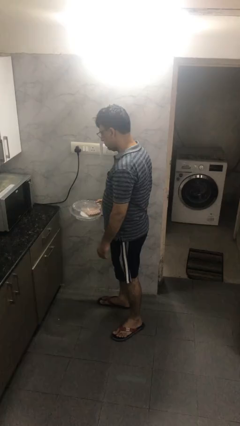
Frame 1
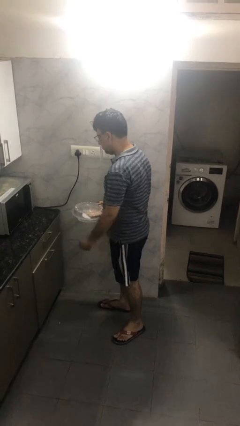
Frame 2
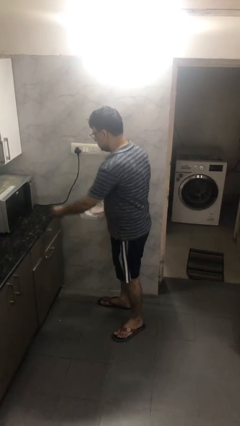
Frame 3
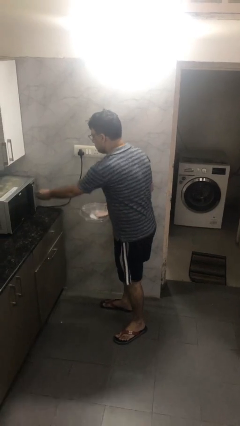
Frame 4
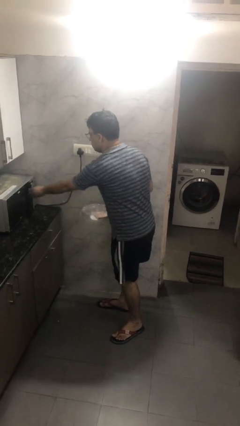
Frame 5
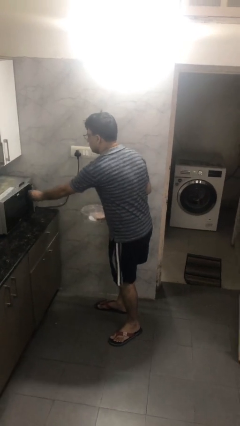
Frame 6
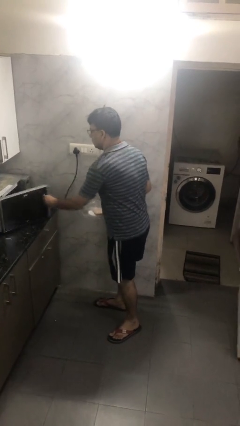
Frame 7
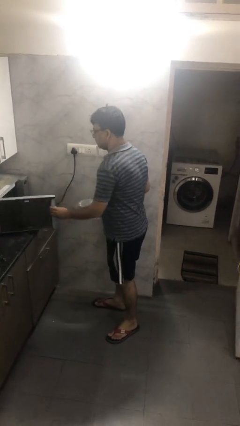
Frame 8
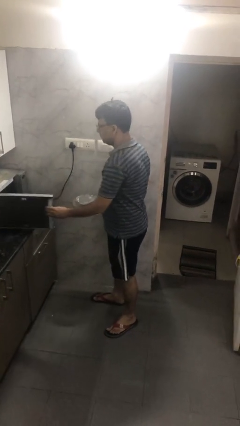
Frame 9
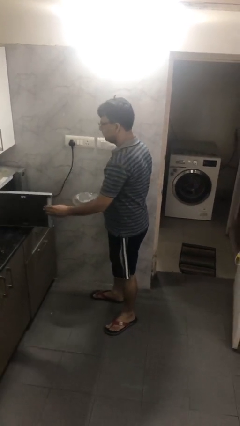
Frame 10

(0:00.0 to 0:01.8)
person opens microwave

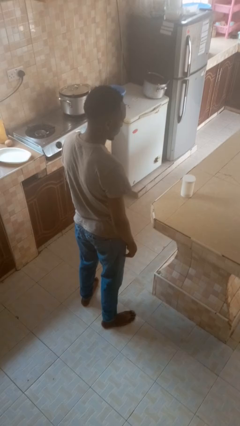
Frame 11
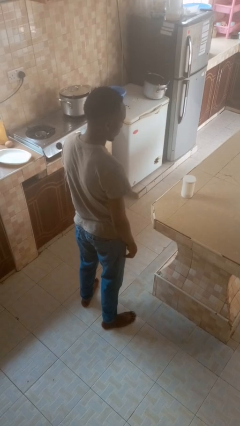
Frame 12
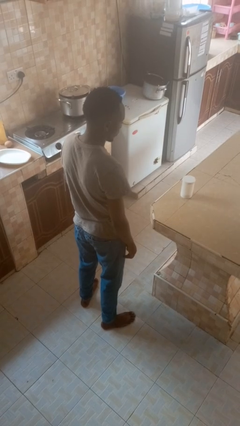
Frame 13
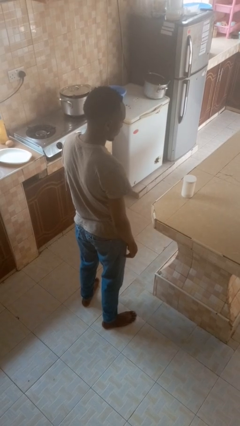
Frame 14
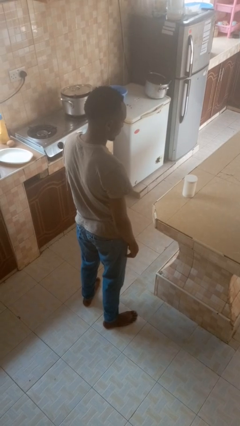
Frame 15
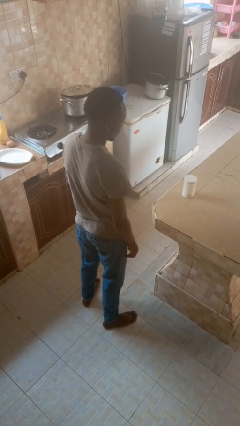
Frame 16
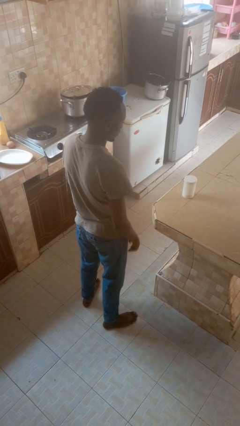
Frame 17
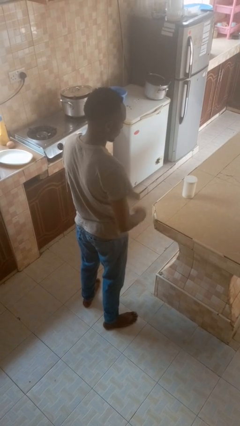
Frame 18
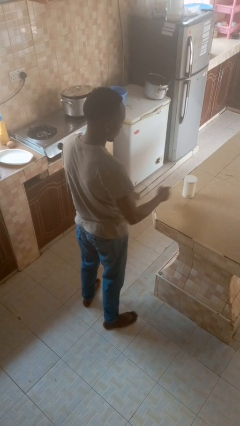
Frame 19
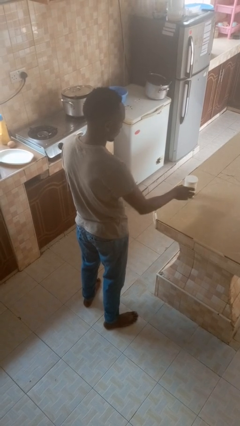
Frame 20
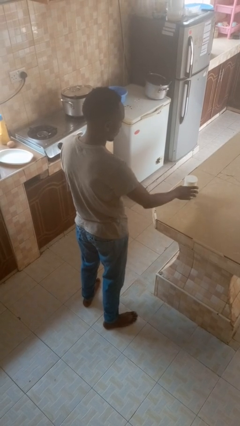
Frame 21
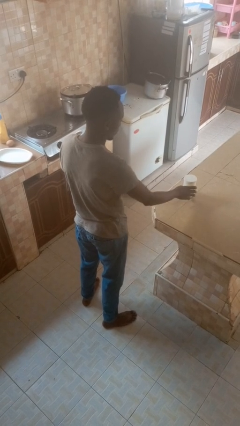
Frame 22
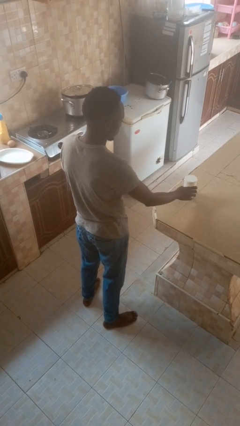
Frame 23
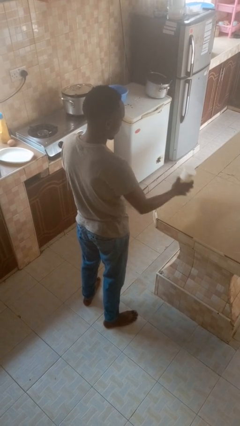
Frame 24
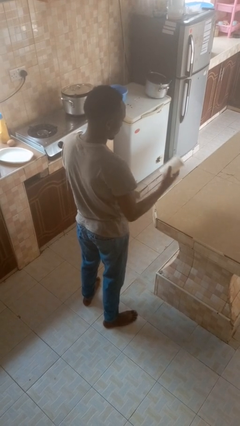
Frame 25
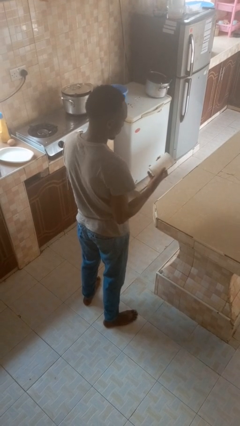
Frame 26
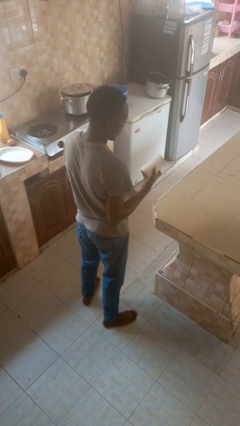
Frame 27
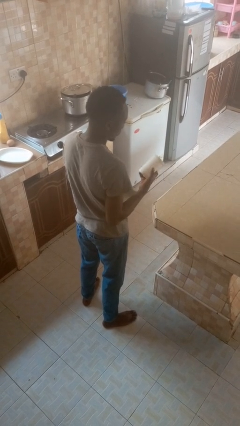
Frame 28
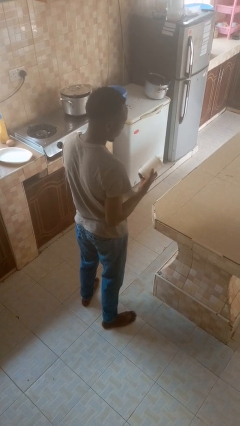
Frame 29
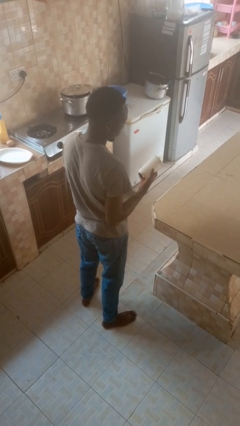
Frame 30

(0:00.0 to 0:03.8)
person picks up object from countertop

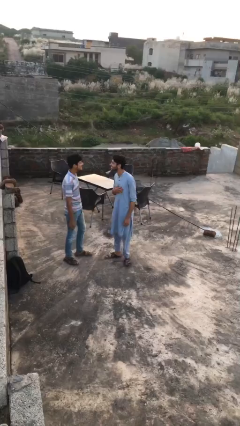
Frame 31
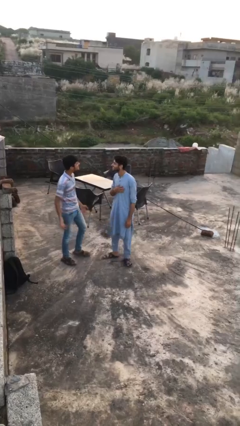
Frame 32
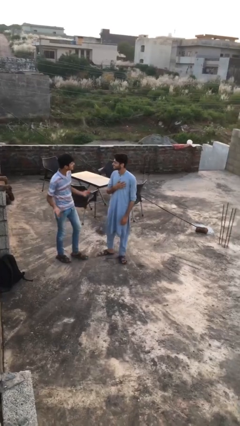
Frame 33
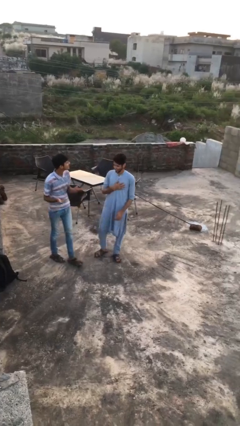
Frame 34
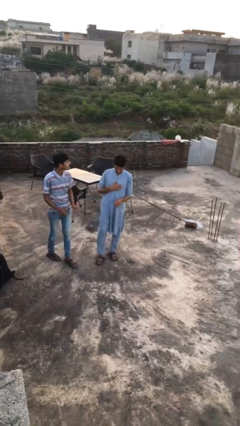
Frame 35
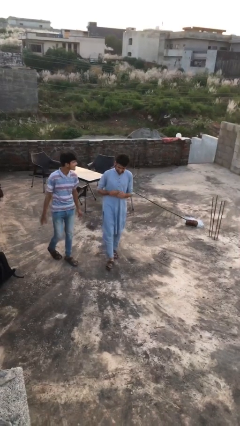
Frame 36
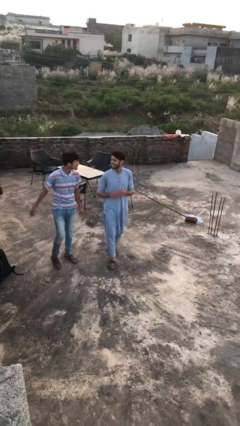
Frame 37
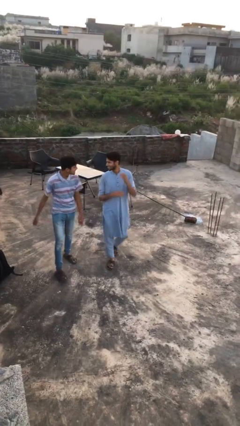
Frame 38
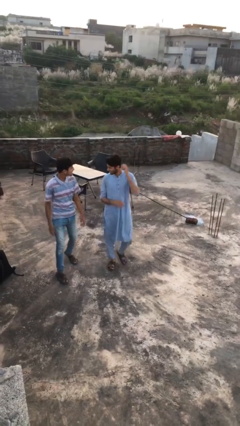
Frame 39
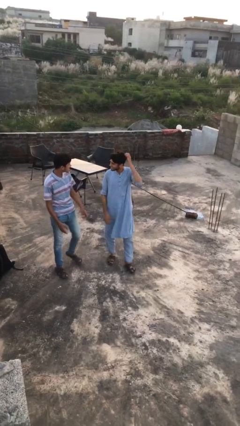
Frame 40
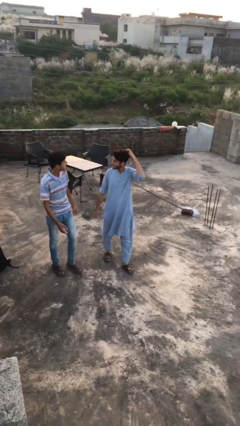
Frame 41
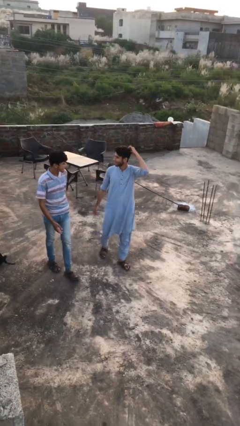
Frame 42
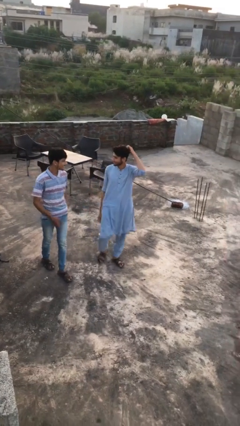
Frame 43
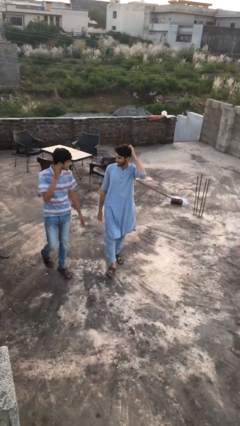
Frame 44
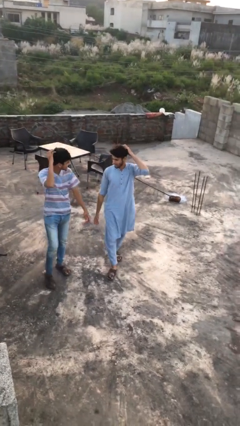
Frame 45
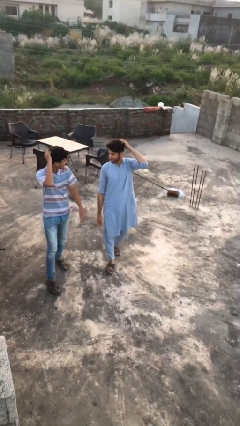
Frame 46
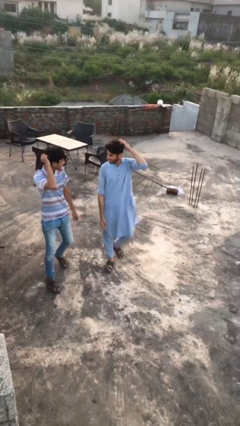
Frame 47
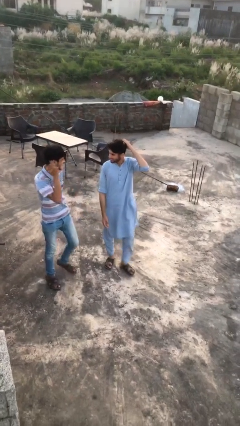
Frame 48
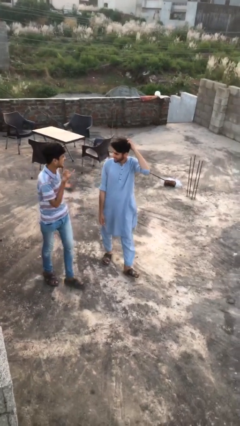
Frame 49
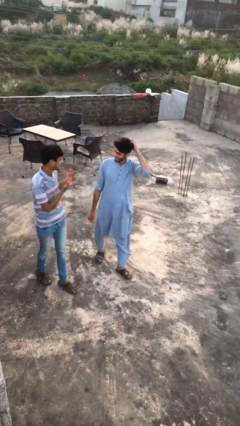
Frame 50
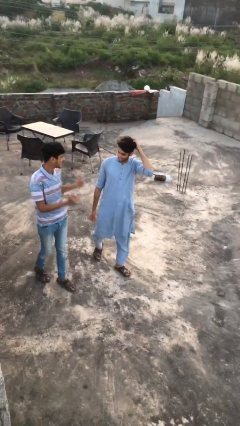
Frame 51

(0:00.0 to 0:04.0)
person talks to person

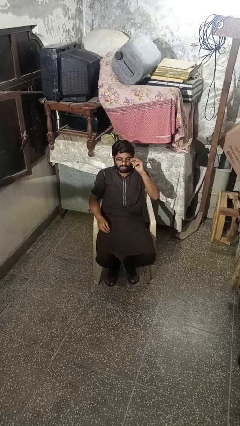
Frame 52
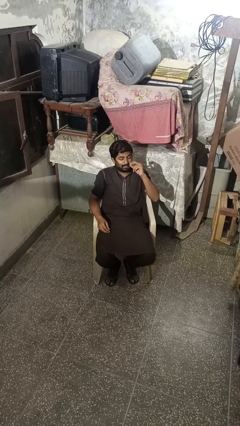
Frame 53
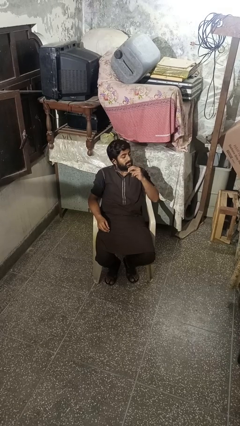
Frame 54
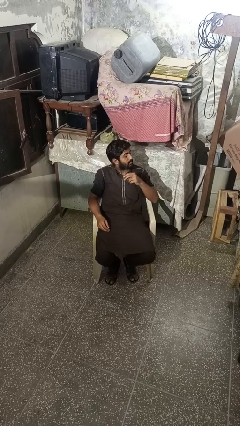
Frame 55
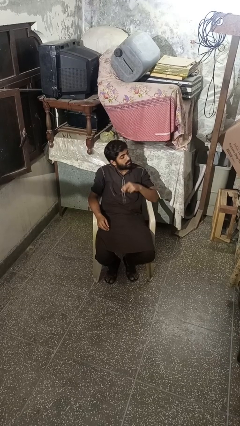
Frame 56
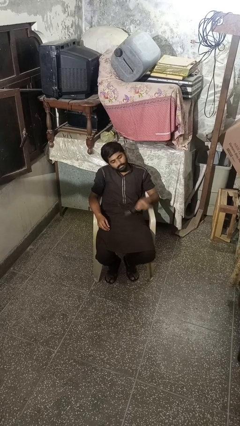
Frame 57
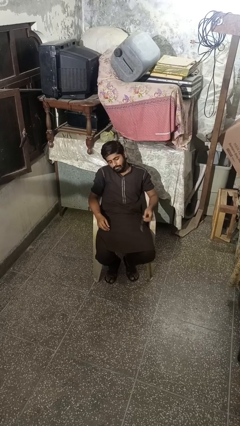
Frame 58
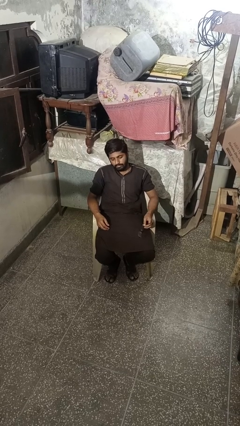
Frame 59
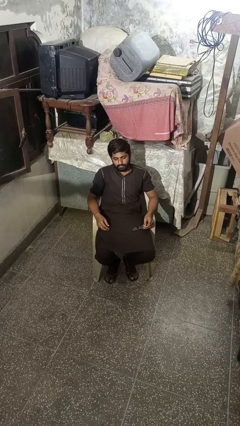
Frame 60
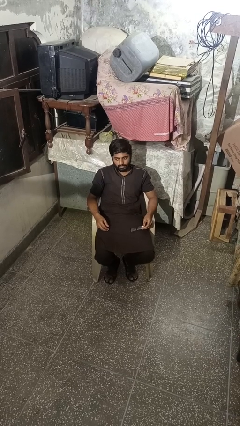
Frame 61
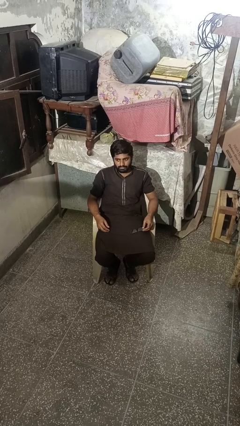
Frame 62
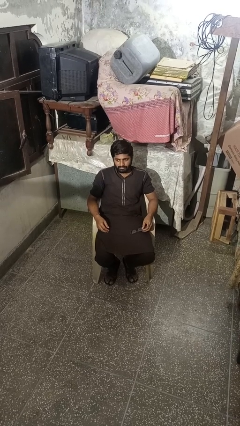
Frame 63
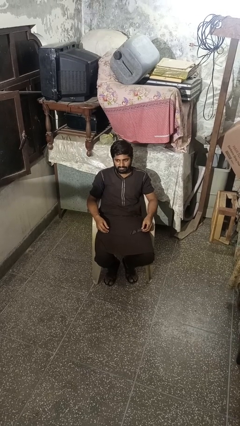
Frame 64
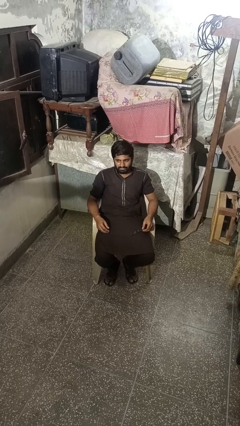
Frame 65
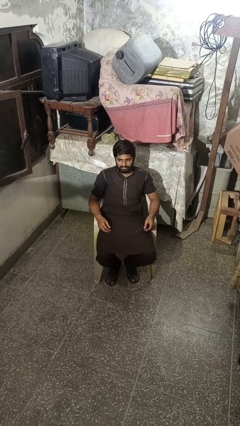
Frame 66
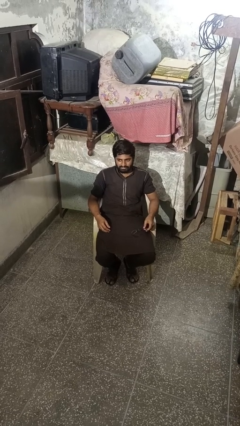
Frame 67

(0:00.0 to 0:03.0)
person takes off glasses

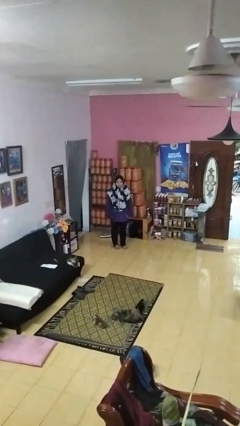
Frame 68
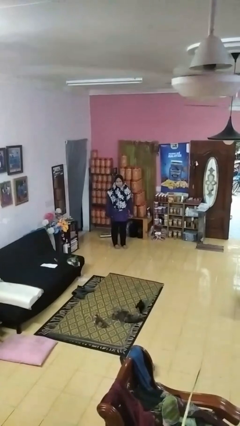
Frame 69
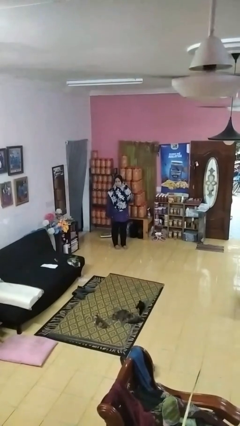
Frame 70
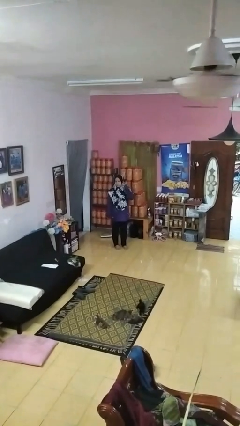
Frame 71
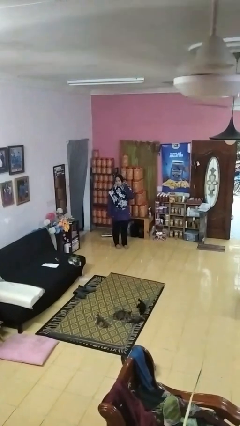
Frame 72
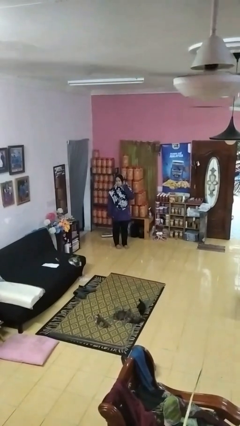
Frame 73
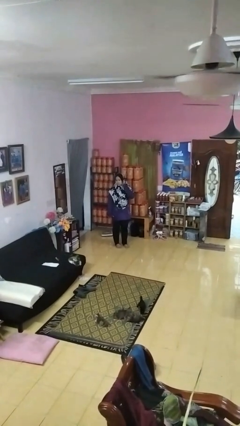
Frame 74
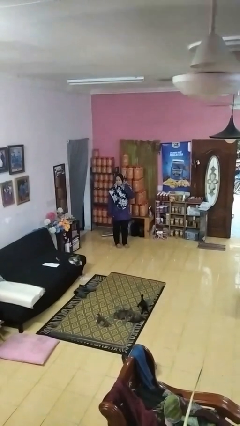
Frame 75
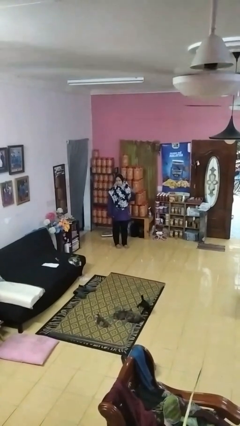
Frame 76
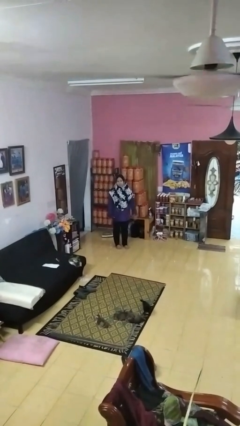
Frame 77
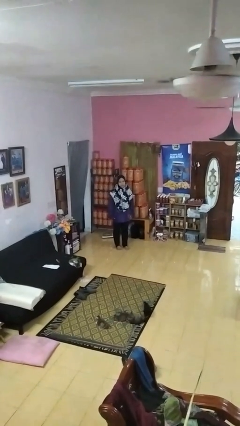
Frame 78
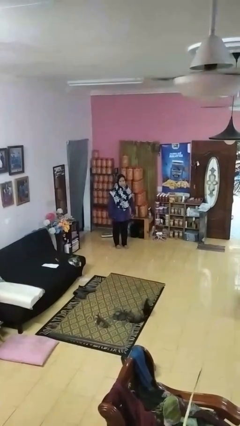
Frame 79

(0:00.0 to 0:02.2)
person gestures listen closely

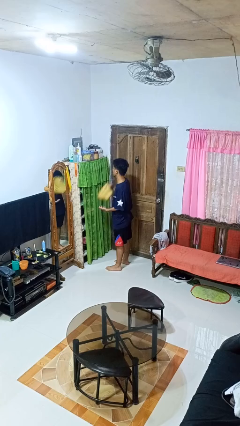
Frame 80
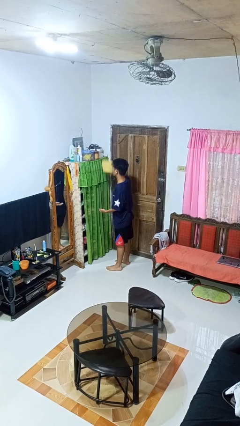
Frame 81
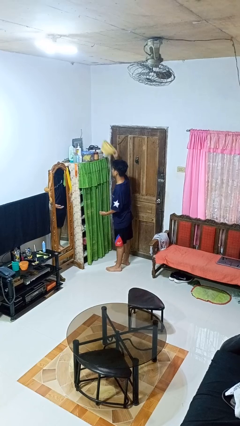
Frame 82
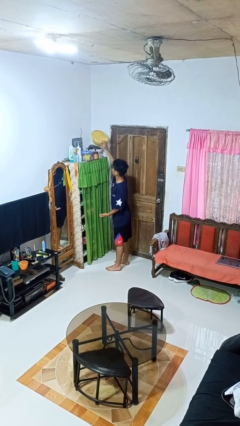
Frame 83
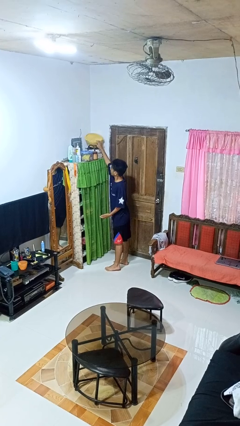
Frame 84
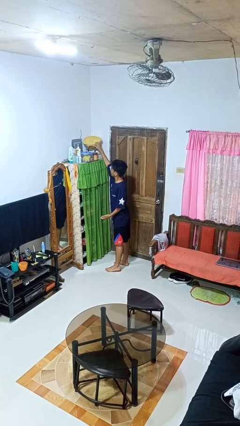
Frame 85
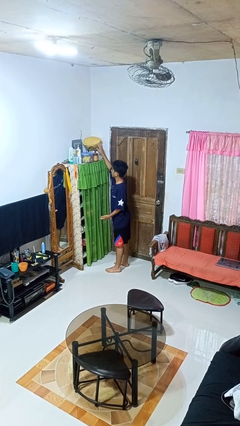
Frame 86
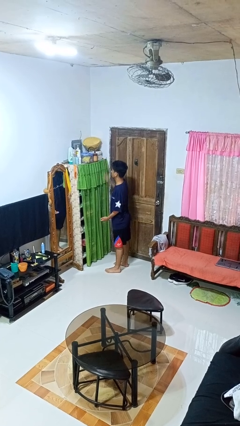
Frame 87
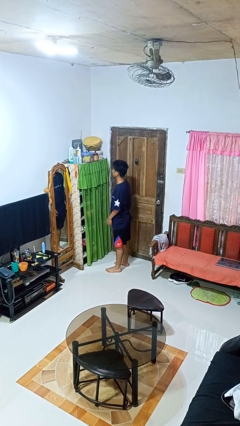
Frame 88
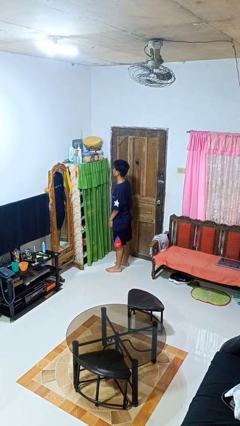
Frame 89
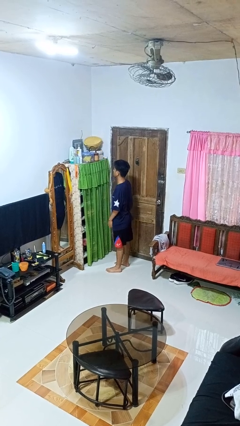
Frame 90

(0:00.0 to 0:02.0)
person puts down object on shelf

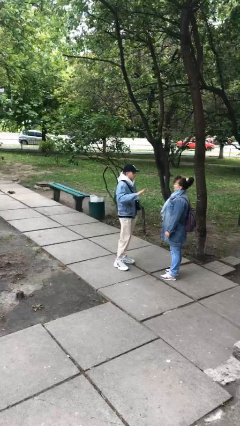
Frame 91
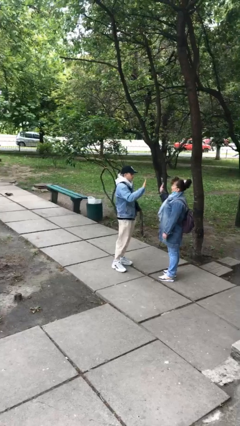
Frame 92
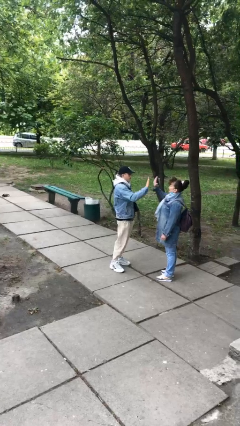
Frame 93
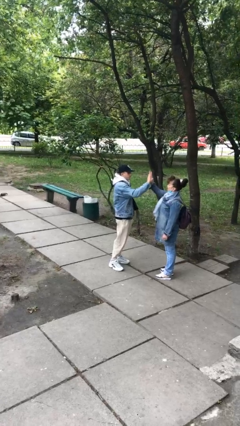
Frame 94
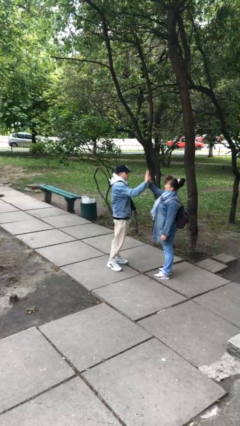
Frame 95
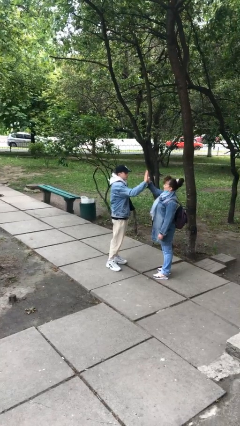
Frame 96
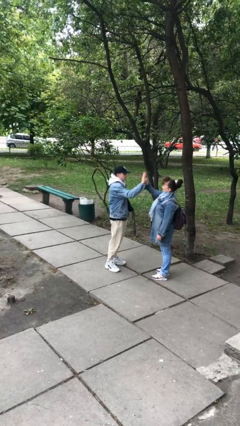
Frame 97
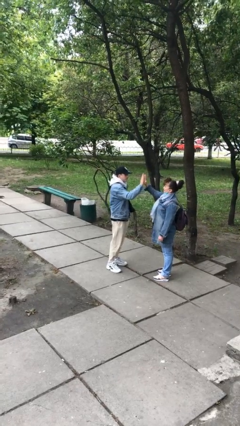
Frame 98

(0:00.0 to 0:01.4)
person highfives hand
